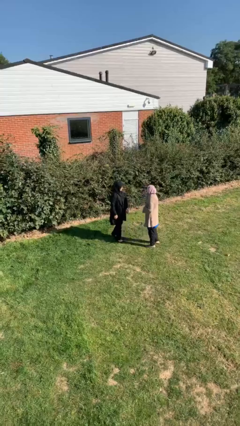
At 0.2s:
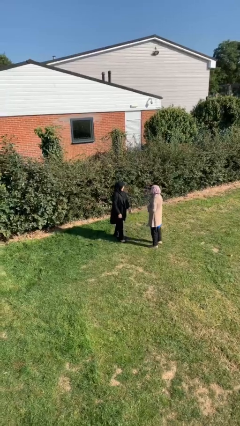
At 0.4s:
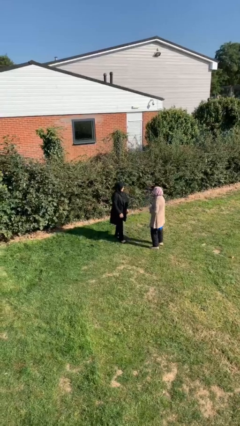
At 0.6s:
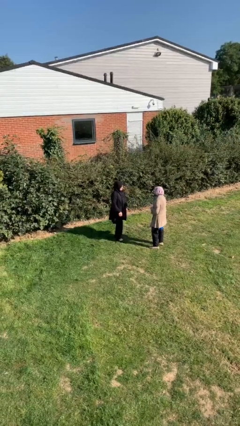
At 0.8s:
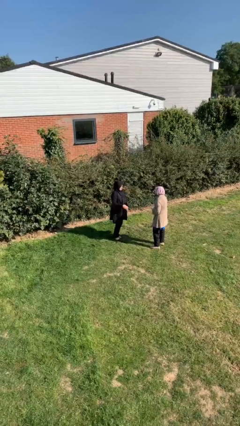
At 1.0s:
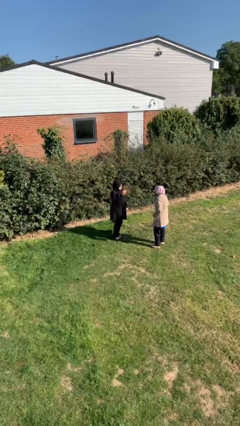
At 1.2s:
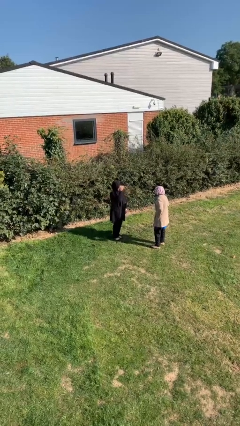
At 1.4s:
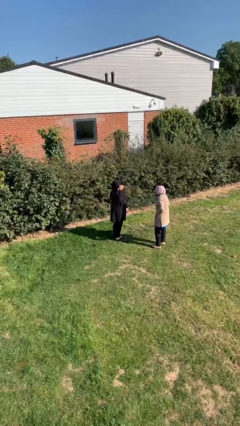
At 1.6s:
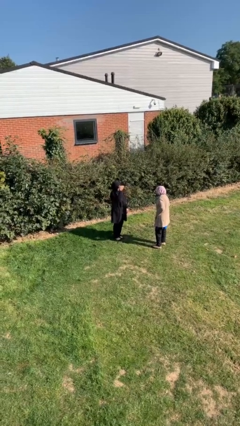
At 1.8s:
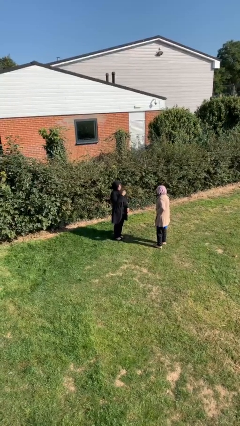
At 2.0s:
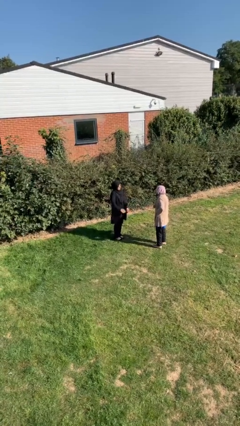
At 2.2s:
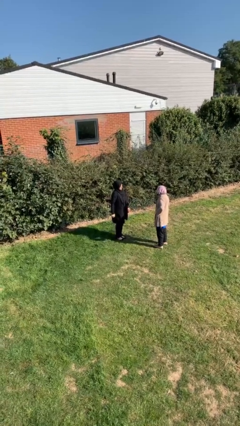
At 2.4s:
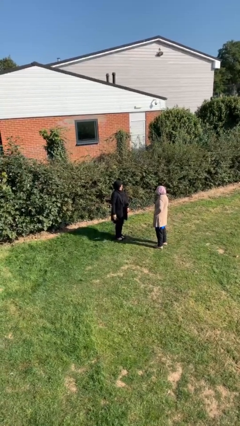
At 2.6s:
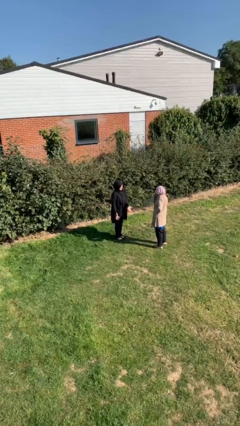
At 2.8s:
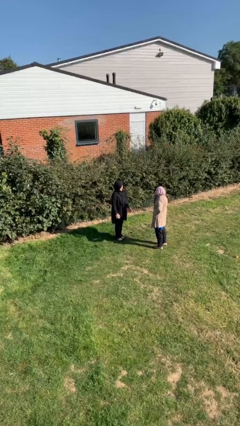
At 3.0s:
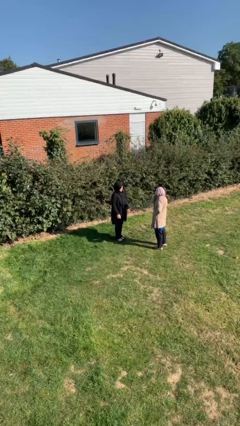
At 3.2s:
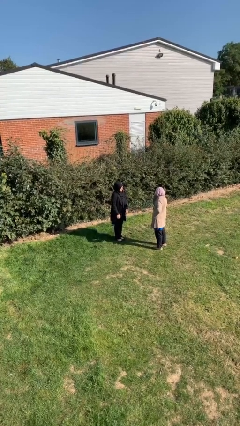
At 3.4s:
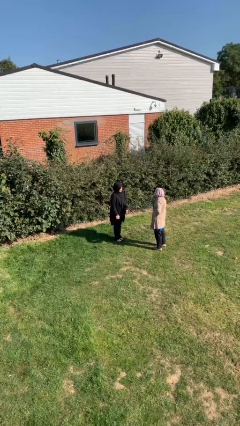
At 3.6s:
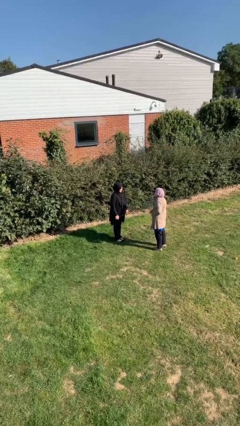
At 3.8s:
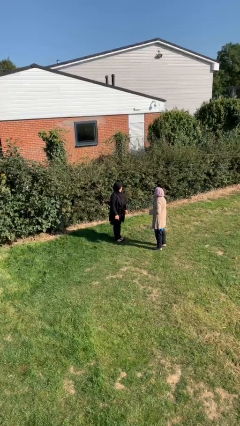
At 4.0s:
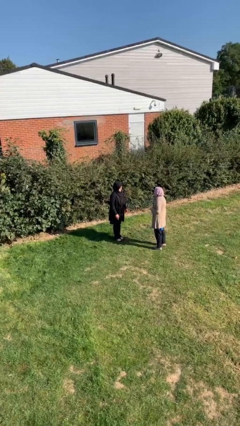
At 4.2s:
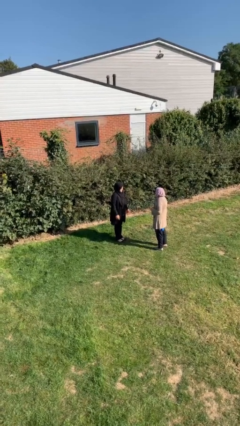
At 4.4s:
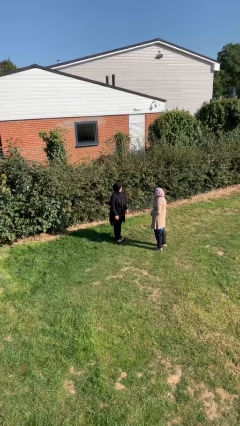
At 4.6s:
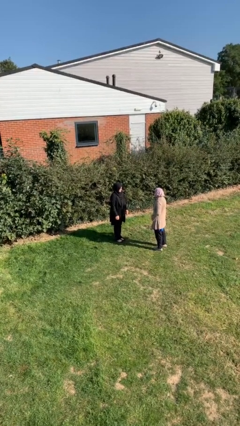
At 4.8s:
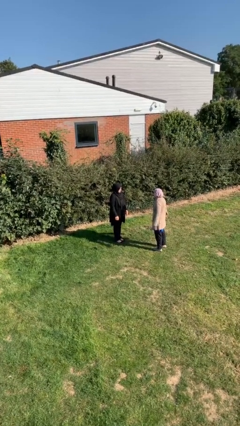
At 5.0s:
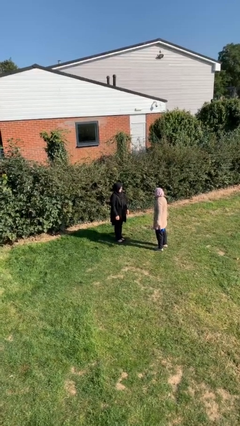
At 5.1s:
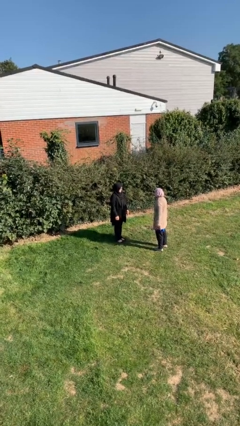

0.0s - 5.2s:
person talks to person

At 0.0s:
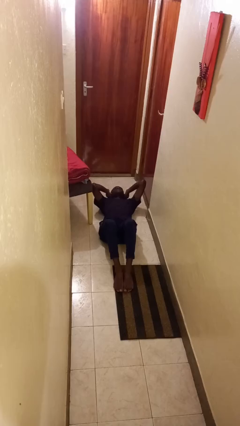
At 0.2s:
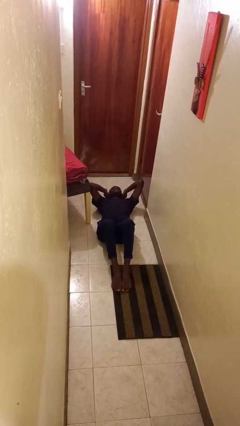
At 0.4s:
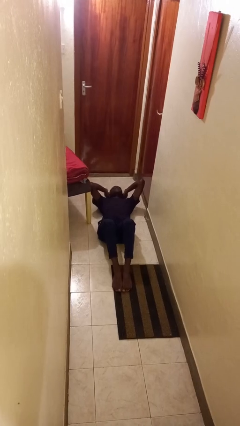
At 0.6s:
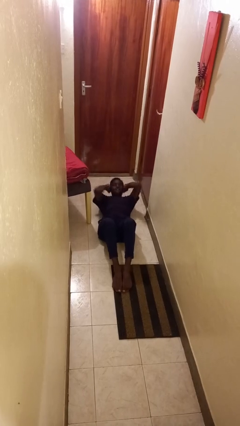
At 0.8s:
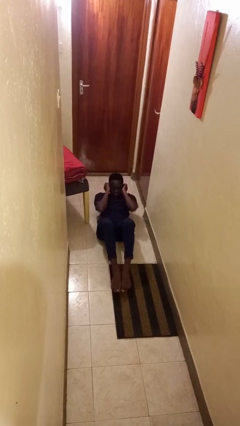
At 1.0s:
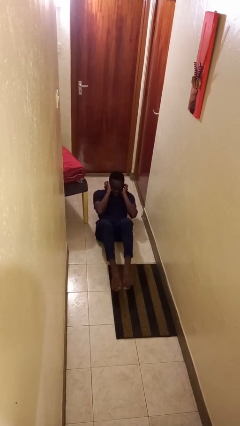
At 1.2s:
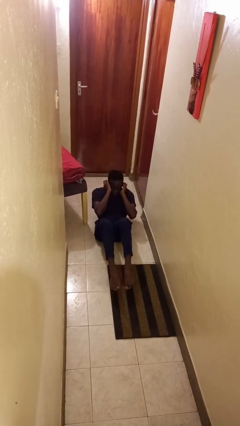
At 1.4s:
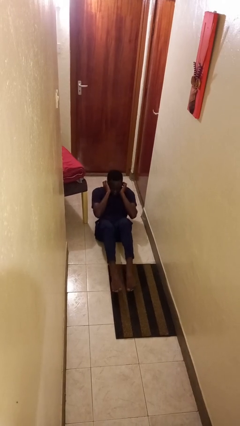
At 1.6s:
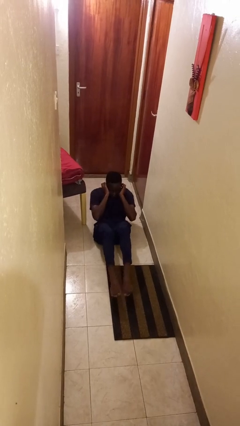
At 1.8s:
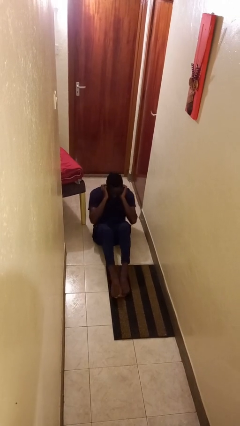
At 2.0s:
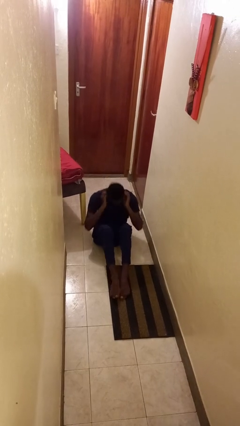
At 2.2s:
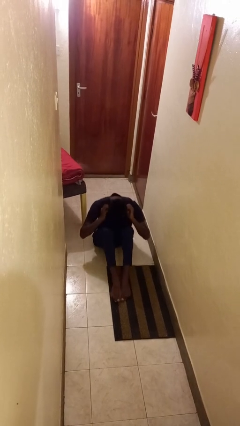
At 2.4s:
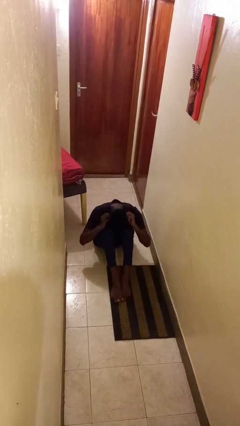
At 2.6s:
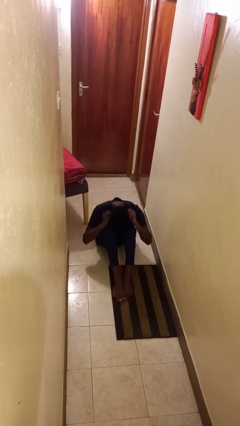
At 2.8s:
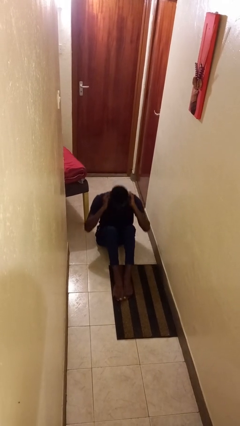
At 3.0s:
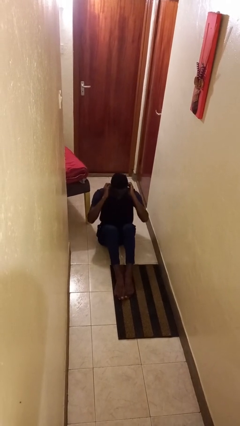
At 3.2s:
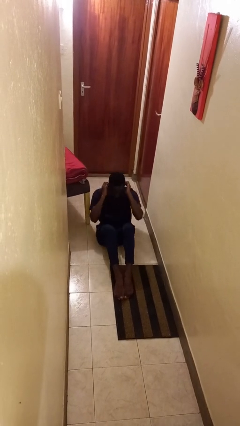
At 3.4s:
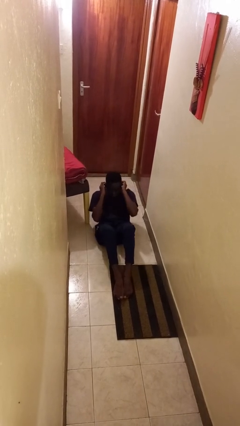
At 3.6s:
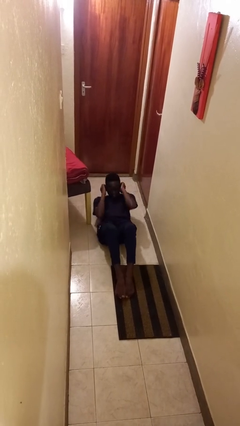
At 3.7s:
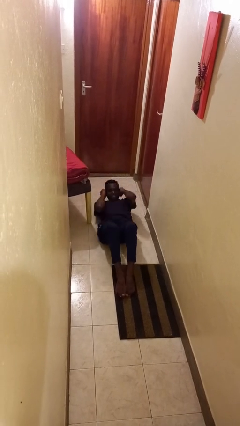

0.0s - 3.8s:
person exercises with situp

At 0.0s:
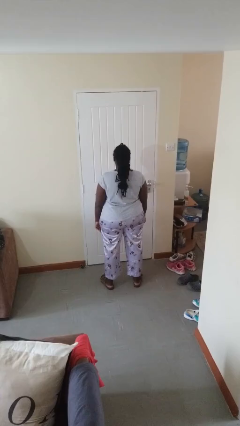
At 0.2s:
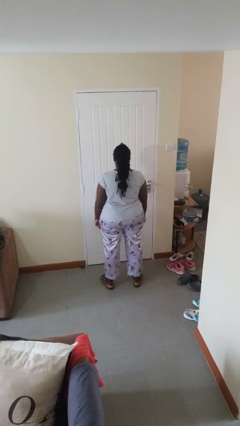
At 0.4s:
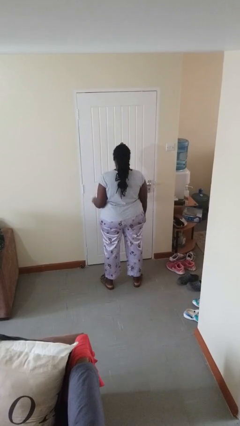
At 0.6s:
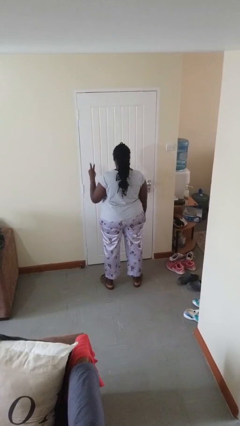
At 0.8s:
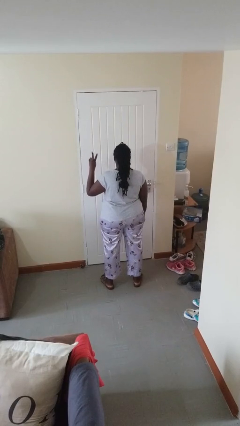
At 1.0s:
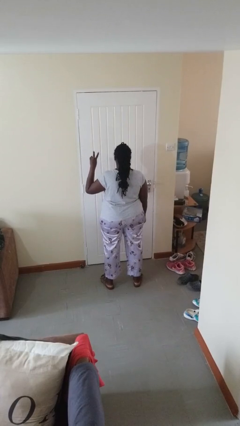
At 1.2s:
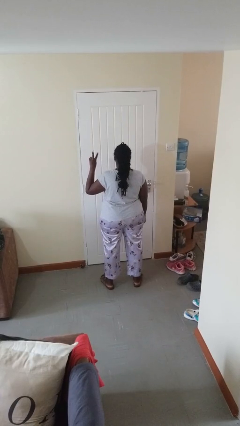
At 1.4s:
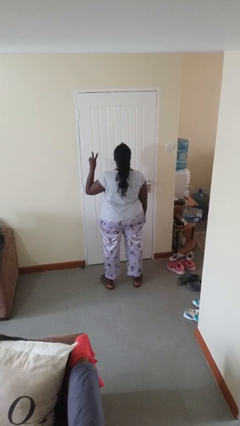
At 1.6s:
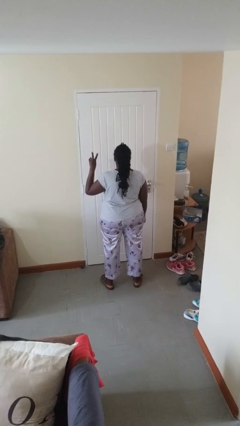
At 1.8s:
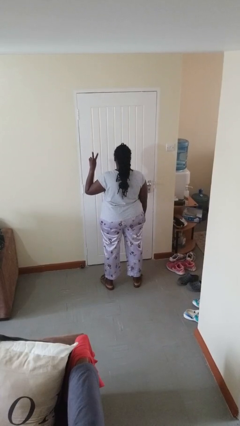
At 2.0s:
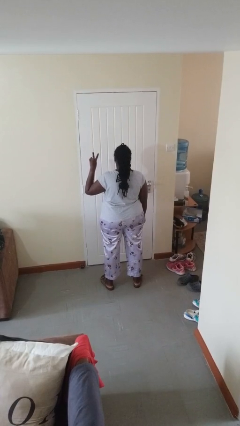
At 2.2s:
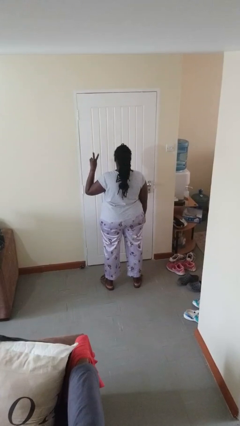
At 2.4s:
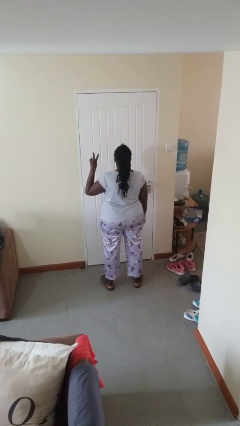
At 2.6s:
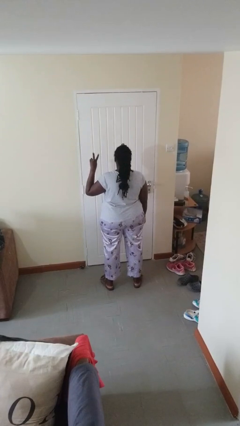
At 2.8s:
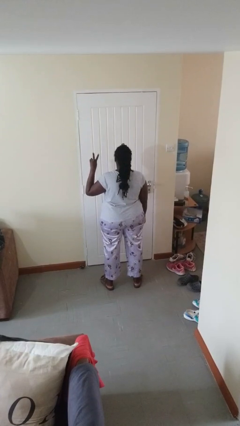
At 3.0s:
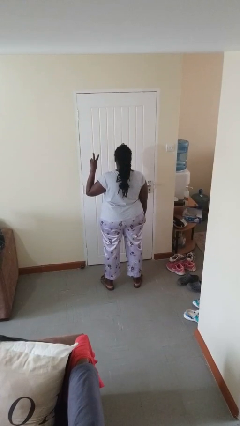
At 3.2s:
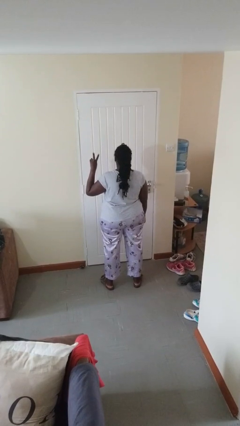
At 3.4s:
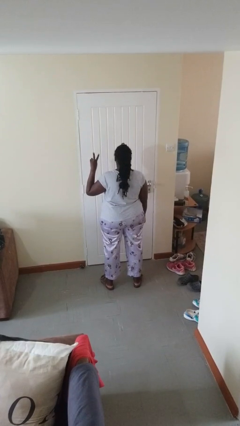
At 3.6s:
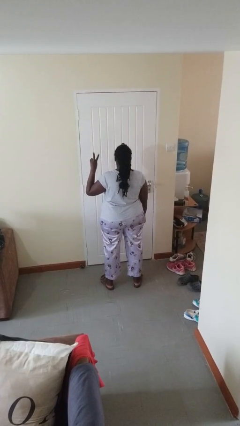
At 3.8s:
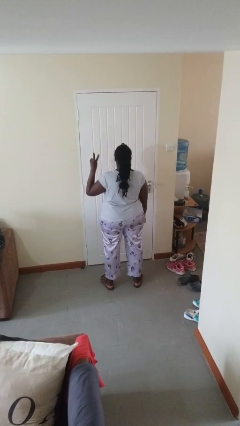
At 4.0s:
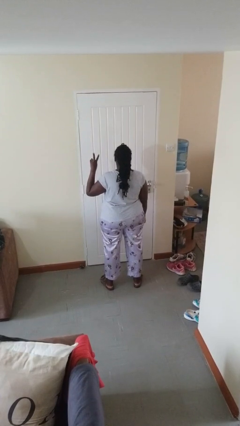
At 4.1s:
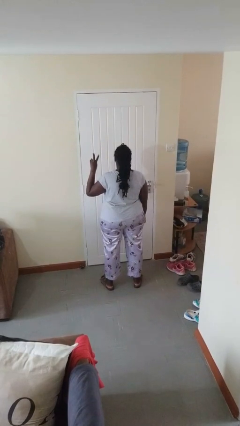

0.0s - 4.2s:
person gestures peace

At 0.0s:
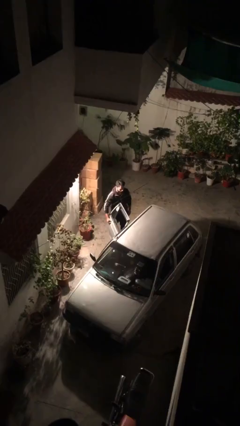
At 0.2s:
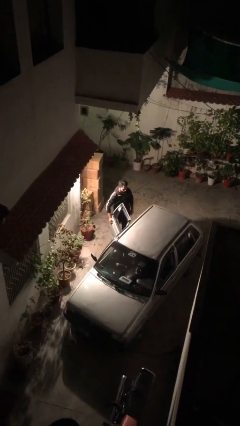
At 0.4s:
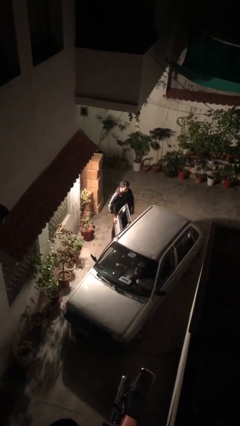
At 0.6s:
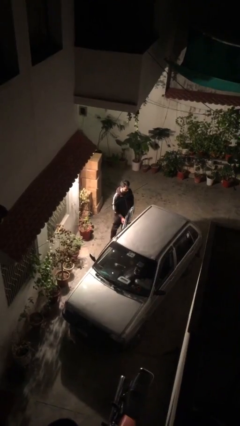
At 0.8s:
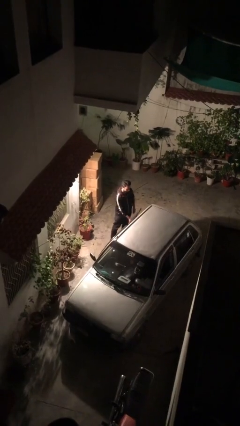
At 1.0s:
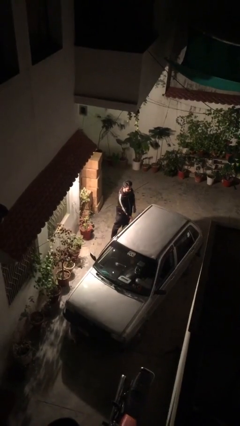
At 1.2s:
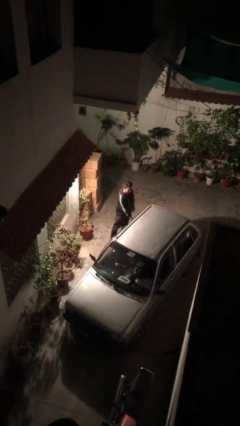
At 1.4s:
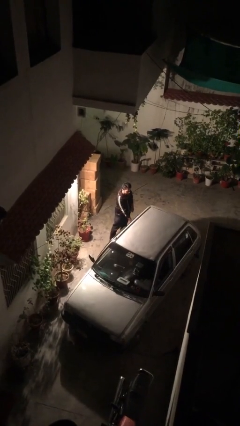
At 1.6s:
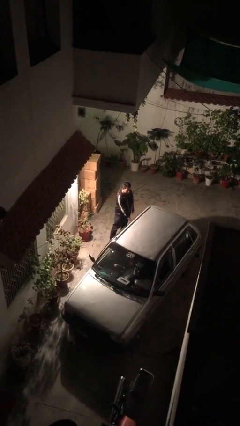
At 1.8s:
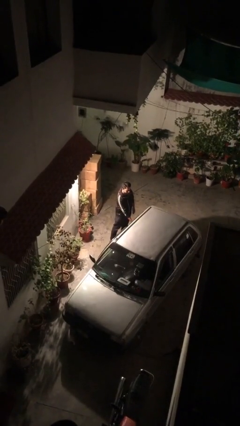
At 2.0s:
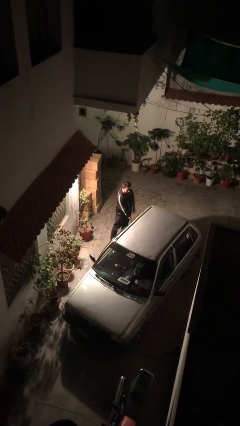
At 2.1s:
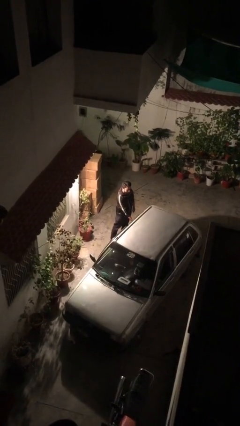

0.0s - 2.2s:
person closes car door

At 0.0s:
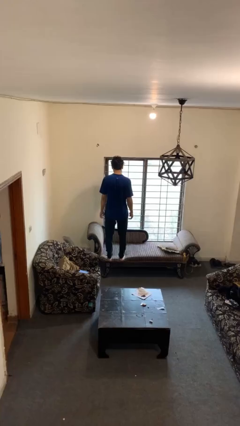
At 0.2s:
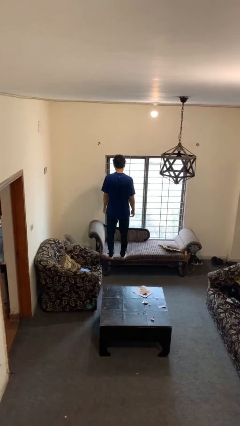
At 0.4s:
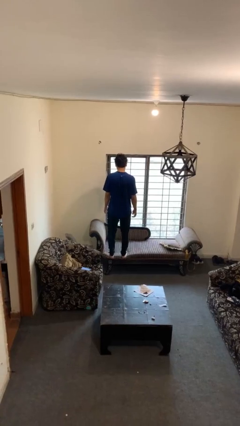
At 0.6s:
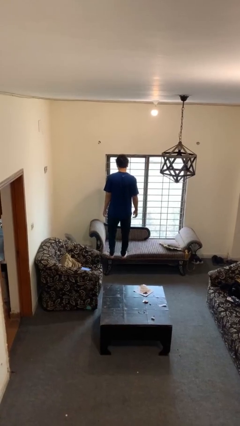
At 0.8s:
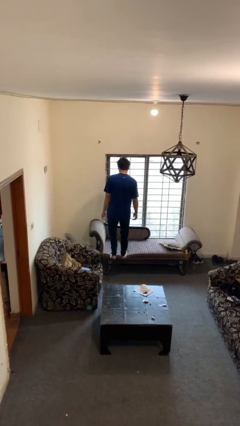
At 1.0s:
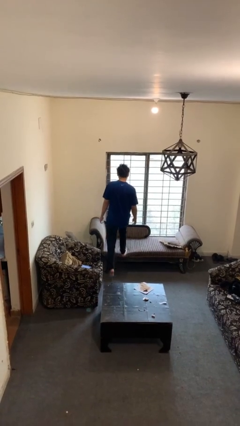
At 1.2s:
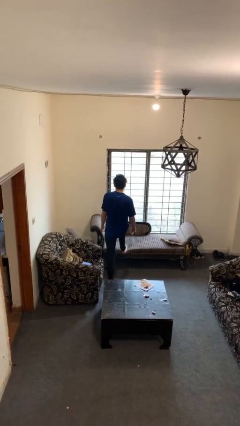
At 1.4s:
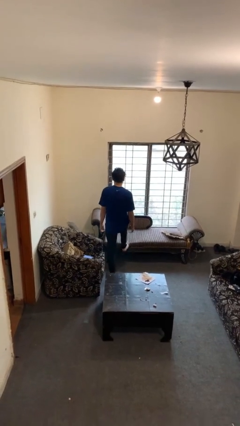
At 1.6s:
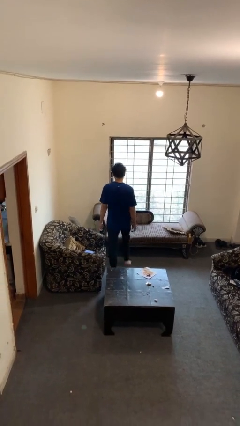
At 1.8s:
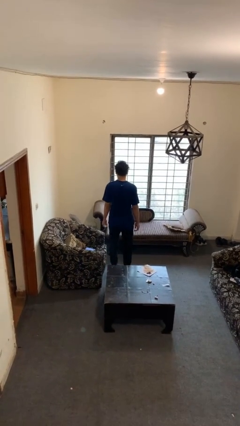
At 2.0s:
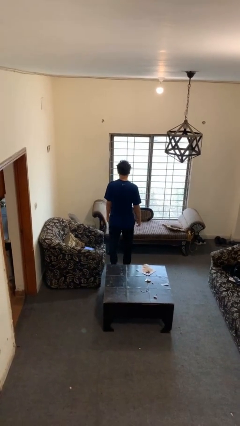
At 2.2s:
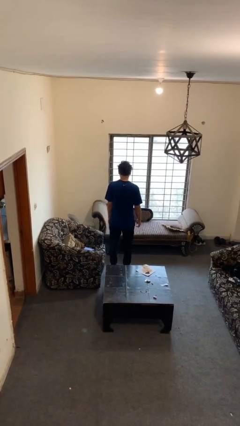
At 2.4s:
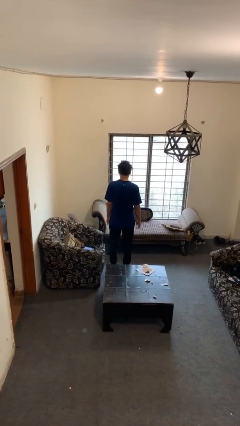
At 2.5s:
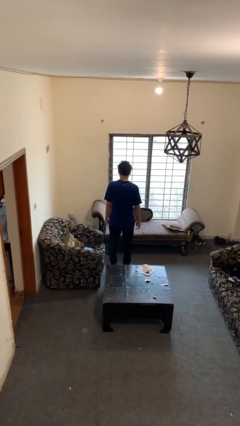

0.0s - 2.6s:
person climbs off couch
